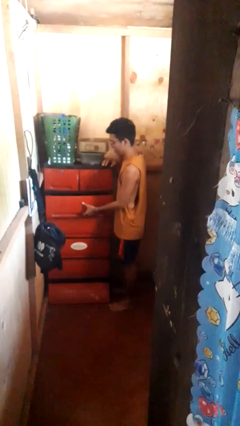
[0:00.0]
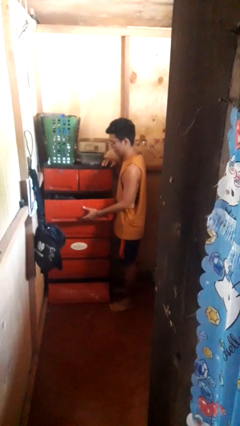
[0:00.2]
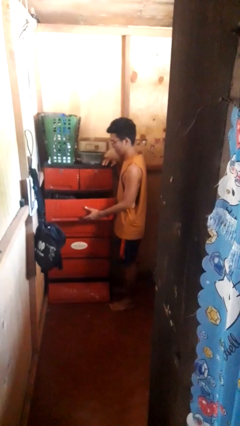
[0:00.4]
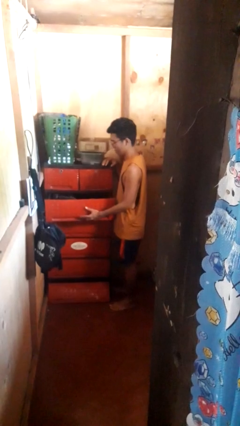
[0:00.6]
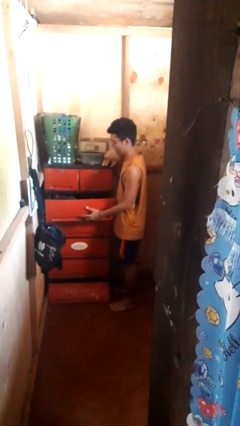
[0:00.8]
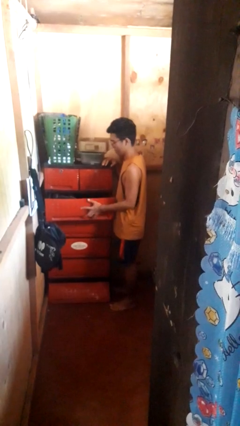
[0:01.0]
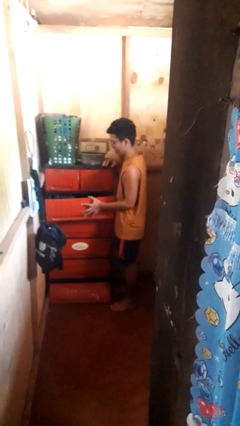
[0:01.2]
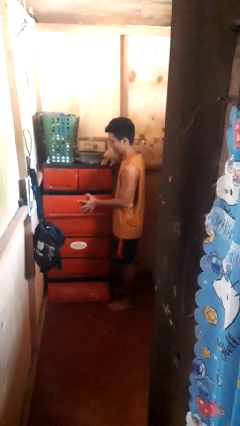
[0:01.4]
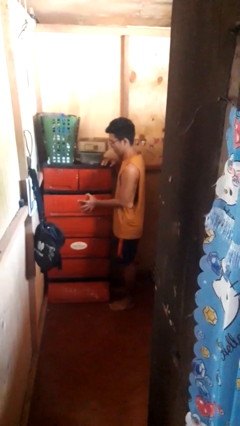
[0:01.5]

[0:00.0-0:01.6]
person opens dresser drawer

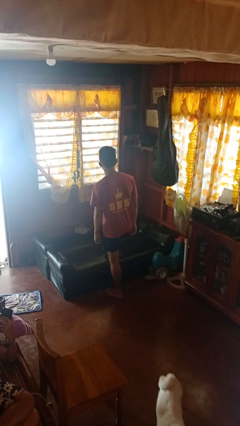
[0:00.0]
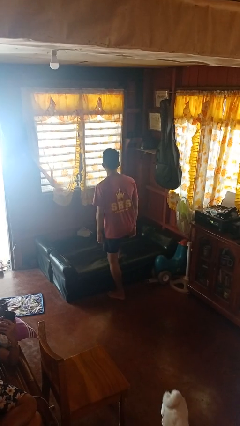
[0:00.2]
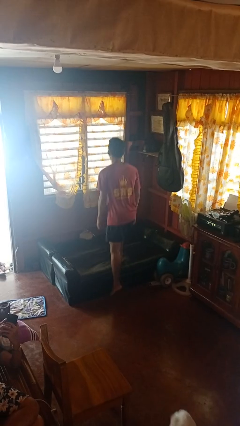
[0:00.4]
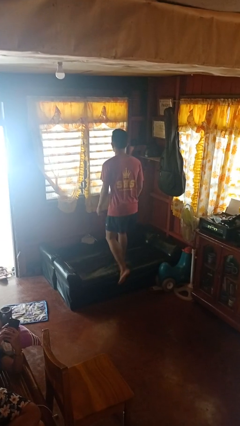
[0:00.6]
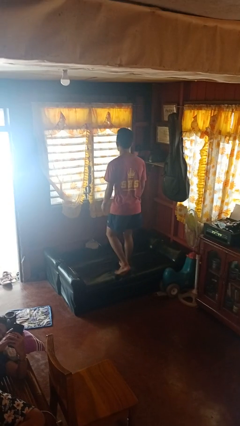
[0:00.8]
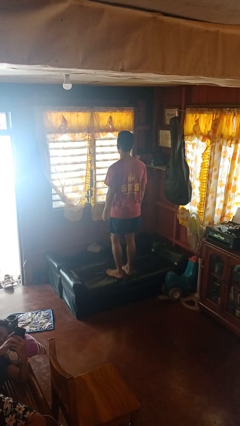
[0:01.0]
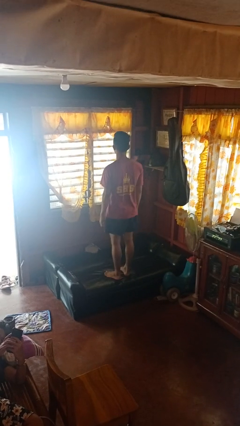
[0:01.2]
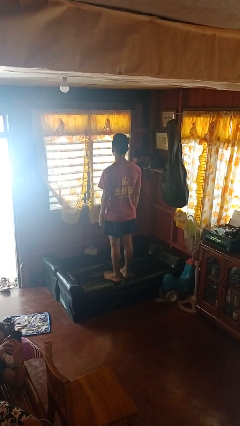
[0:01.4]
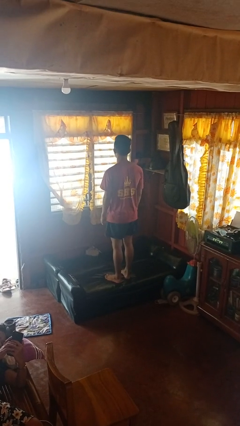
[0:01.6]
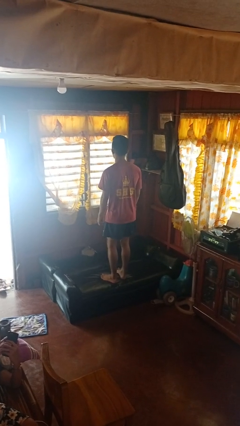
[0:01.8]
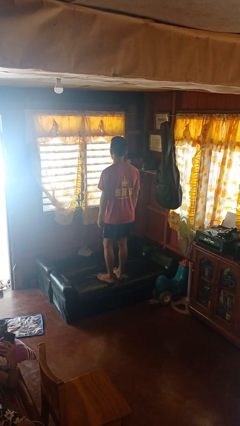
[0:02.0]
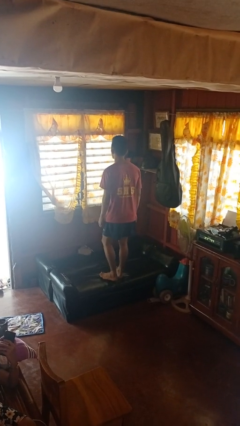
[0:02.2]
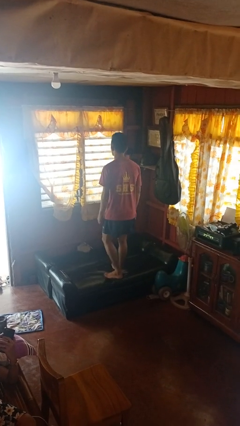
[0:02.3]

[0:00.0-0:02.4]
person climbs on couch

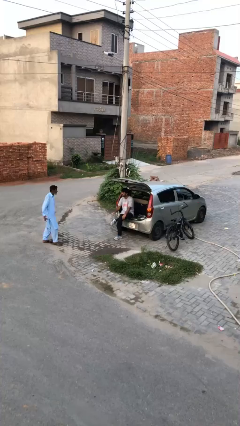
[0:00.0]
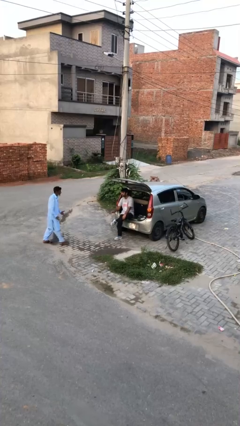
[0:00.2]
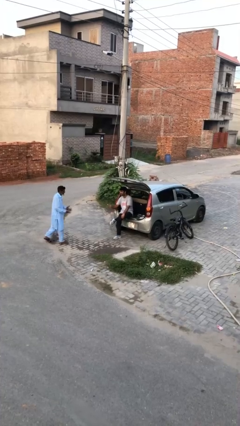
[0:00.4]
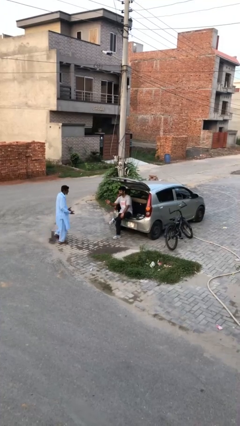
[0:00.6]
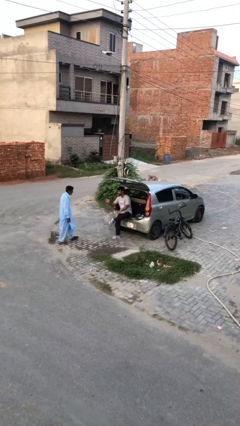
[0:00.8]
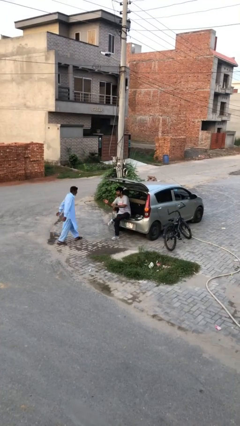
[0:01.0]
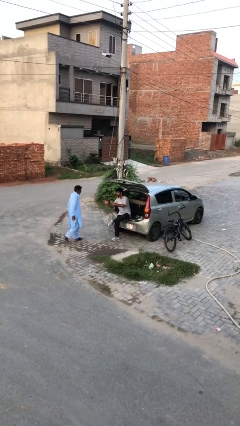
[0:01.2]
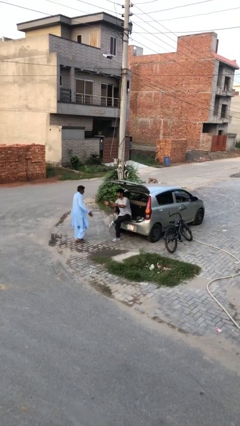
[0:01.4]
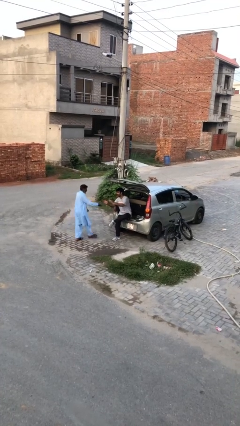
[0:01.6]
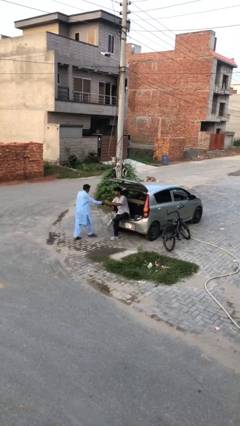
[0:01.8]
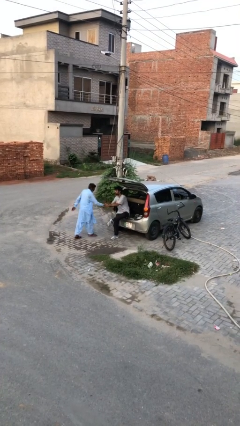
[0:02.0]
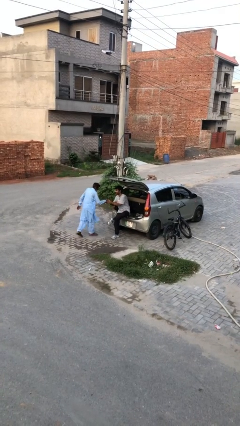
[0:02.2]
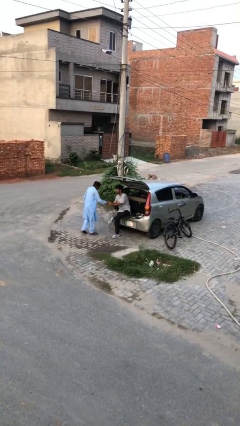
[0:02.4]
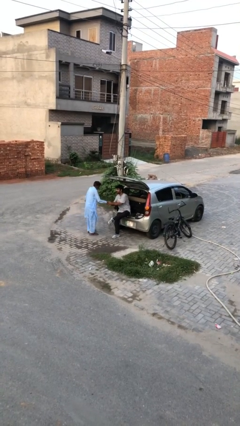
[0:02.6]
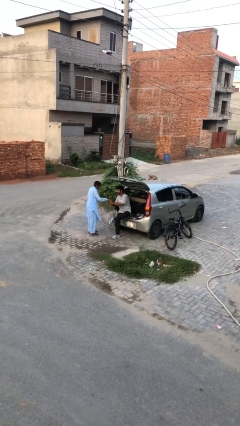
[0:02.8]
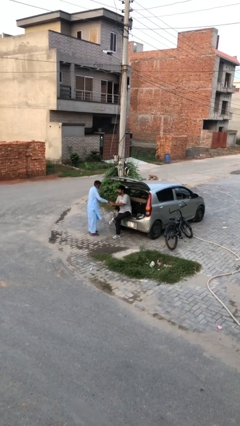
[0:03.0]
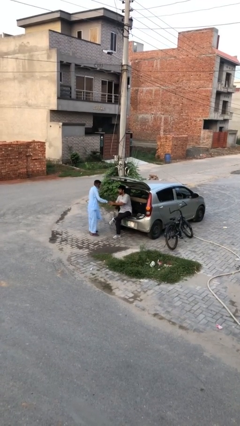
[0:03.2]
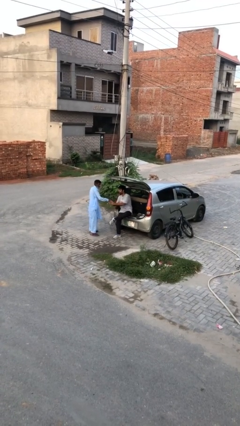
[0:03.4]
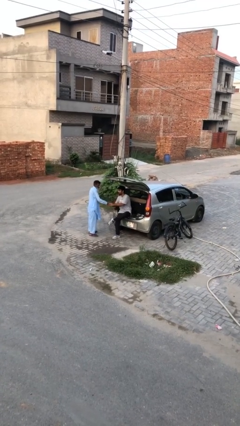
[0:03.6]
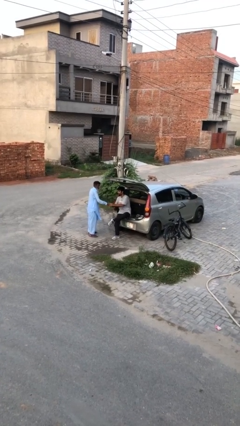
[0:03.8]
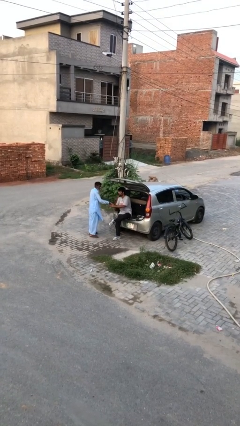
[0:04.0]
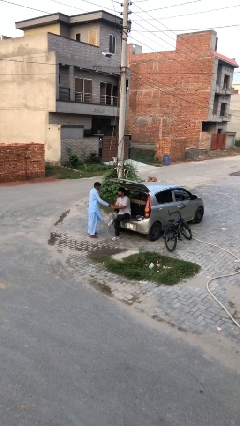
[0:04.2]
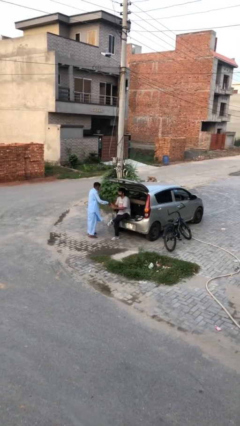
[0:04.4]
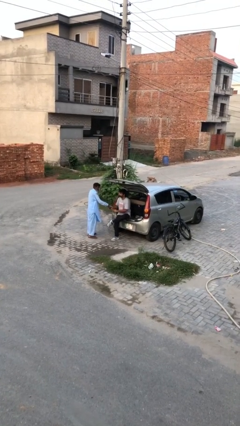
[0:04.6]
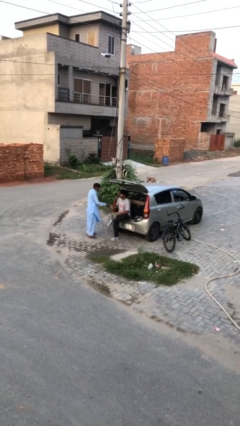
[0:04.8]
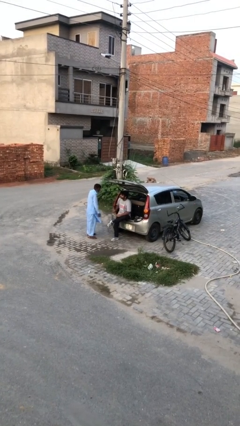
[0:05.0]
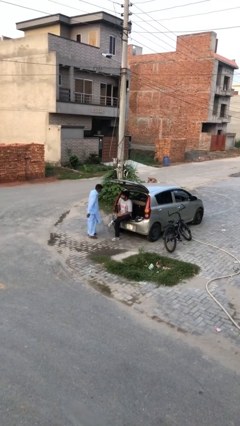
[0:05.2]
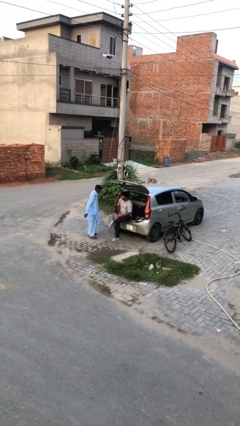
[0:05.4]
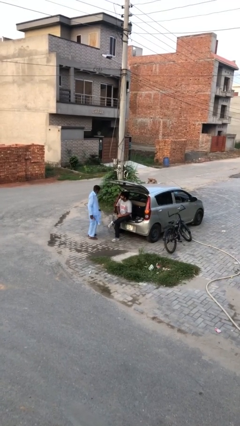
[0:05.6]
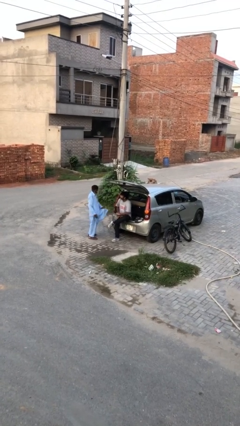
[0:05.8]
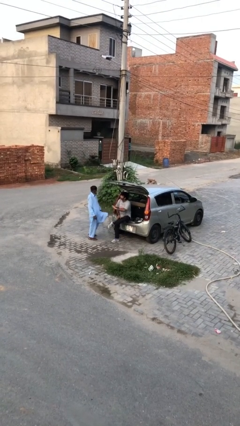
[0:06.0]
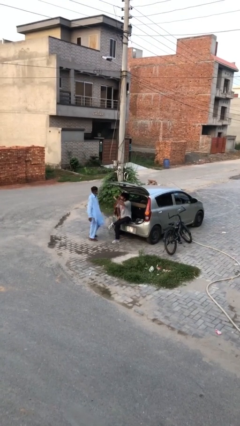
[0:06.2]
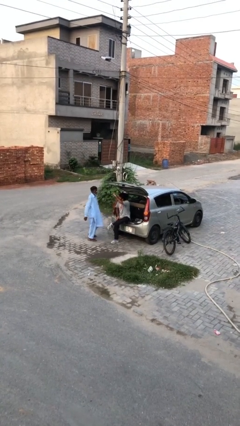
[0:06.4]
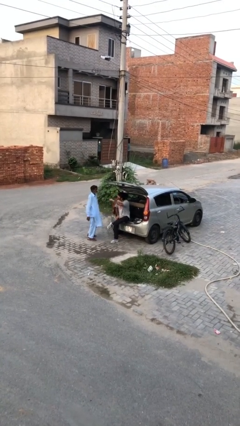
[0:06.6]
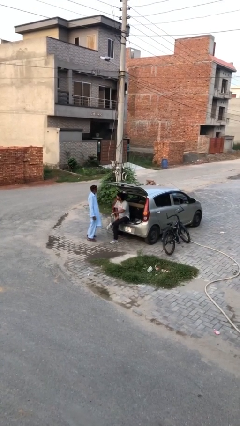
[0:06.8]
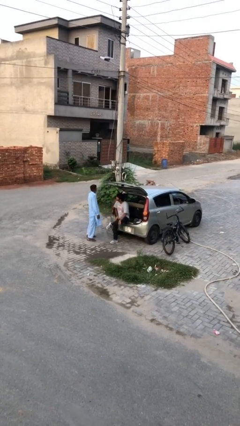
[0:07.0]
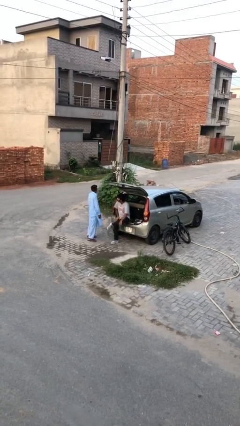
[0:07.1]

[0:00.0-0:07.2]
person shakes hand

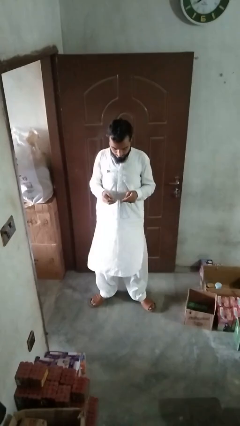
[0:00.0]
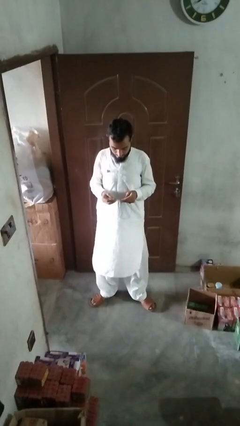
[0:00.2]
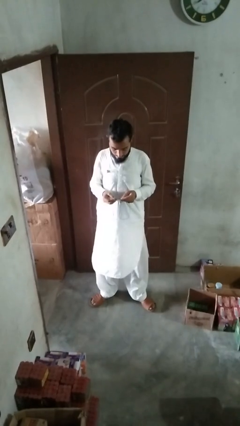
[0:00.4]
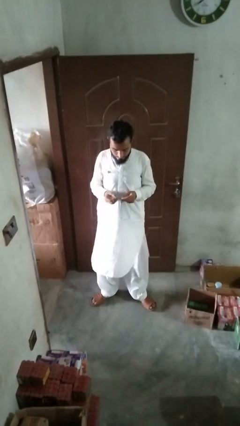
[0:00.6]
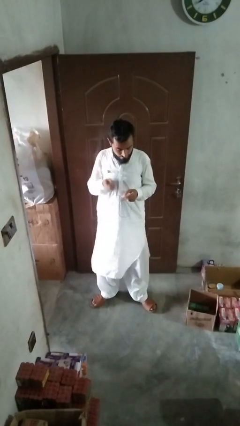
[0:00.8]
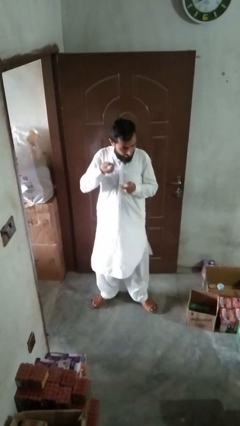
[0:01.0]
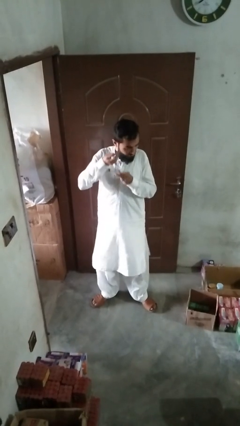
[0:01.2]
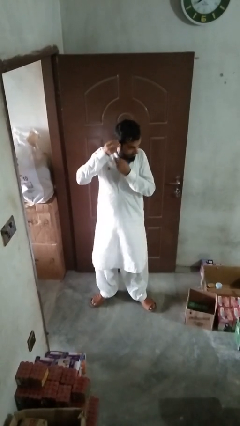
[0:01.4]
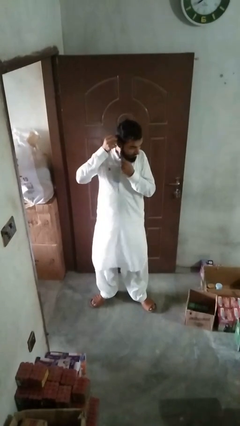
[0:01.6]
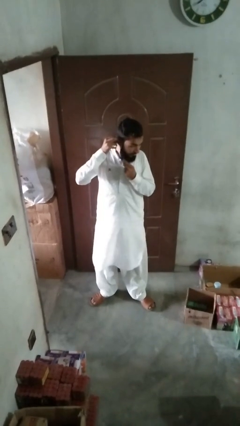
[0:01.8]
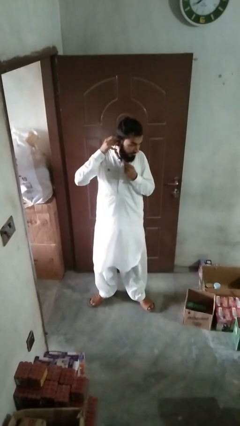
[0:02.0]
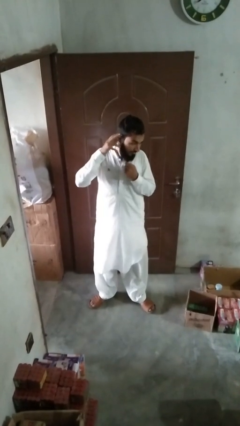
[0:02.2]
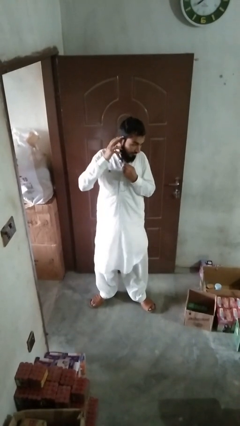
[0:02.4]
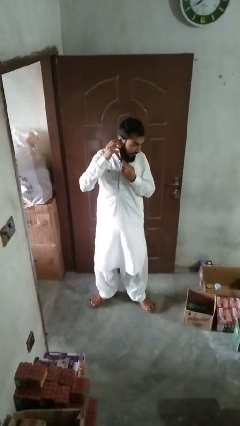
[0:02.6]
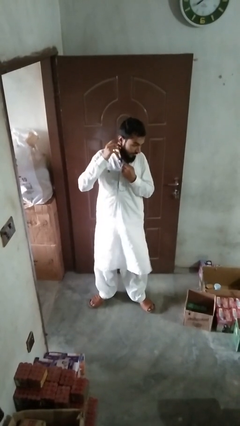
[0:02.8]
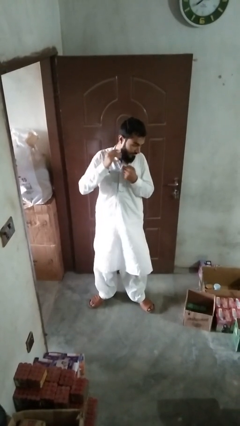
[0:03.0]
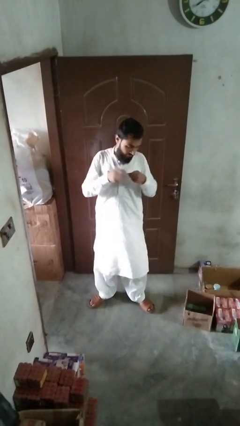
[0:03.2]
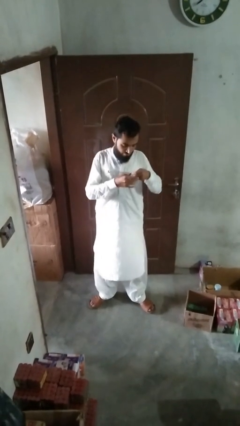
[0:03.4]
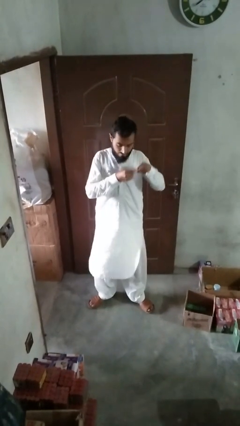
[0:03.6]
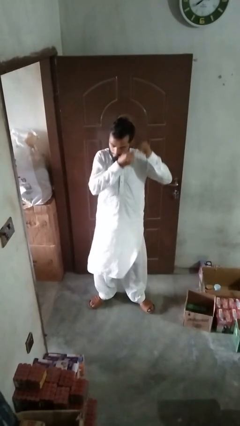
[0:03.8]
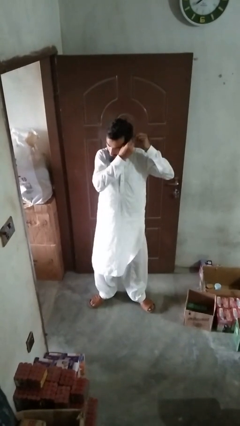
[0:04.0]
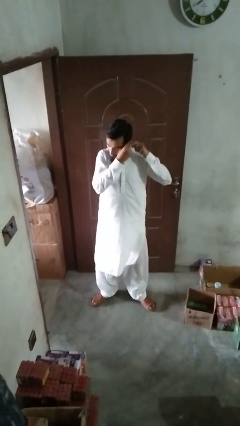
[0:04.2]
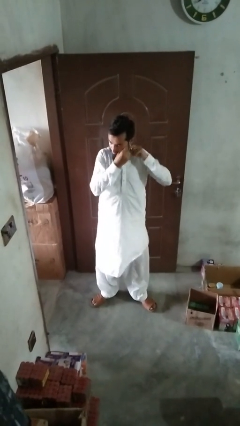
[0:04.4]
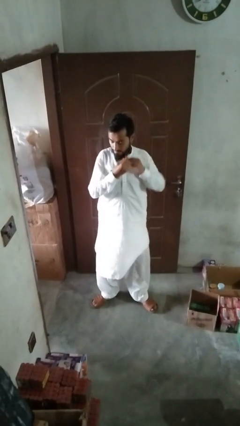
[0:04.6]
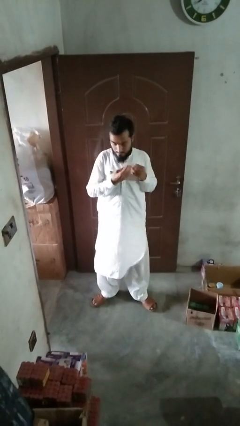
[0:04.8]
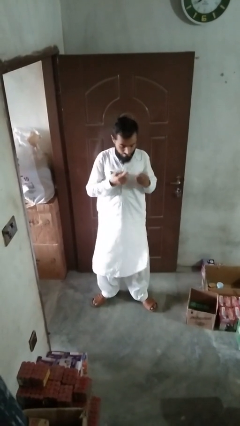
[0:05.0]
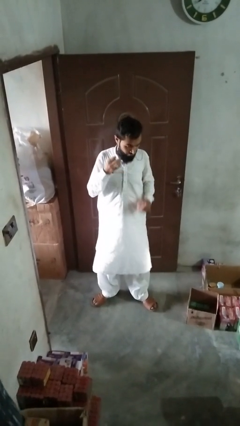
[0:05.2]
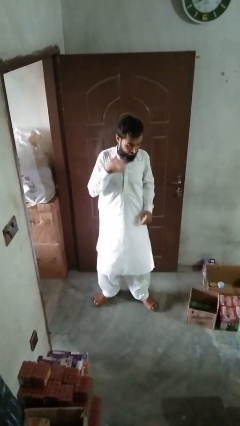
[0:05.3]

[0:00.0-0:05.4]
person puts on earrings

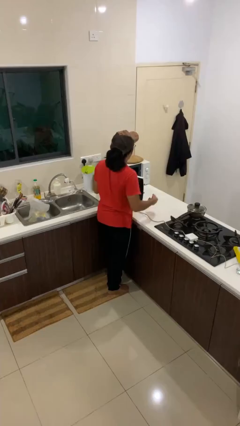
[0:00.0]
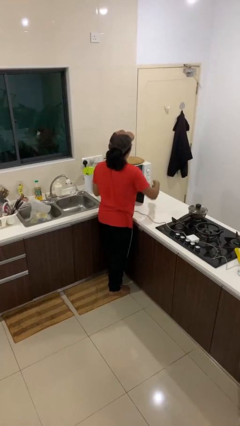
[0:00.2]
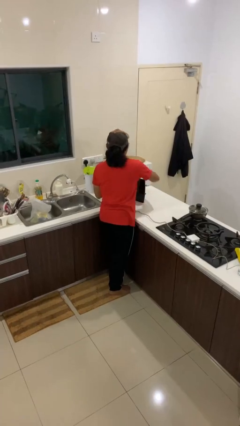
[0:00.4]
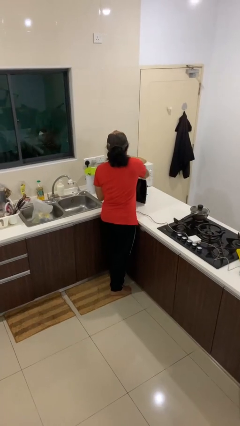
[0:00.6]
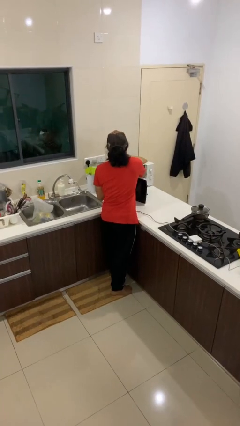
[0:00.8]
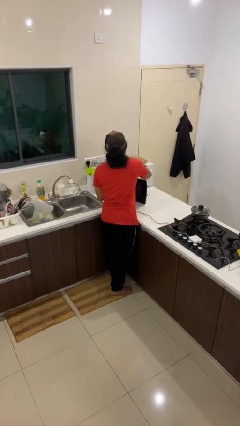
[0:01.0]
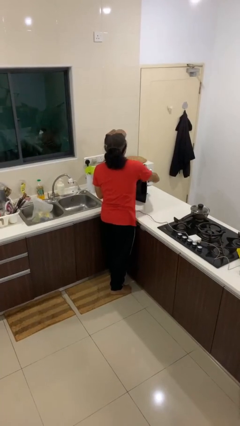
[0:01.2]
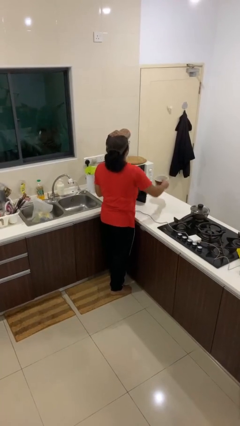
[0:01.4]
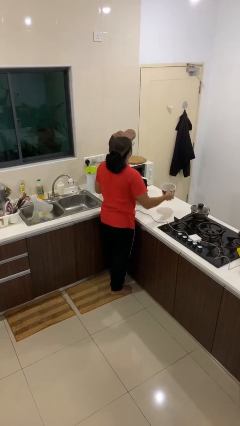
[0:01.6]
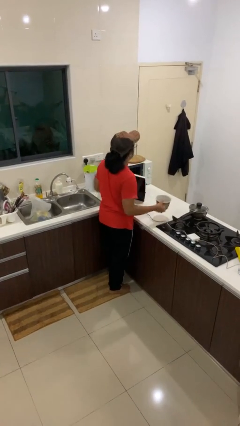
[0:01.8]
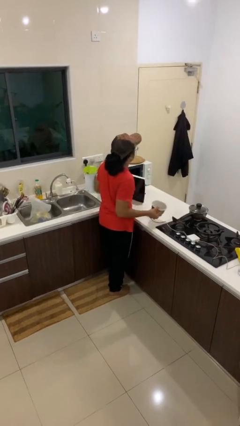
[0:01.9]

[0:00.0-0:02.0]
person takes object from microwave
